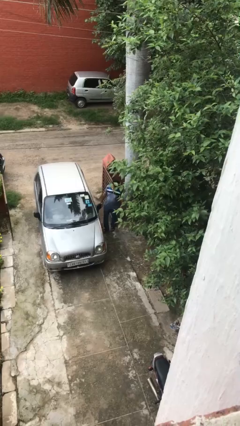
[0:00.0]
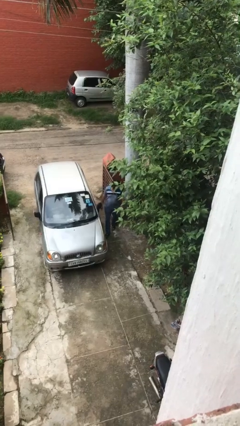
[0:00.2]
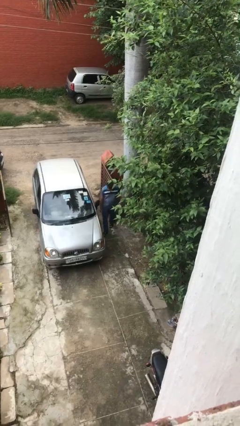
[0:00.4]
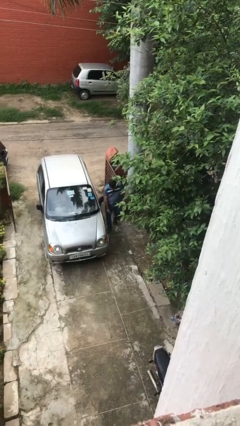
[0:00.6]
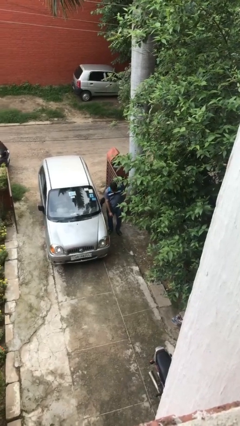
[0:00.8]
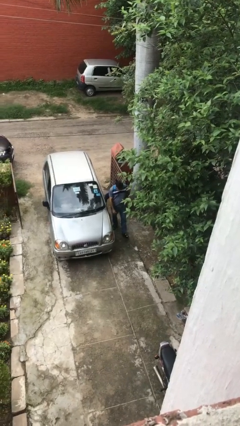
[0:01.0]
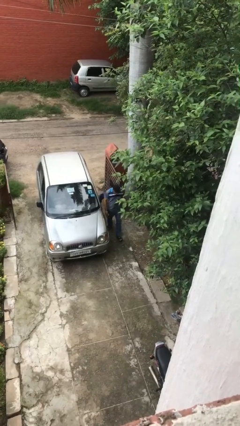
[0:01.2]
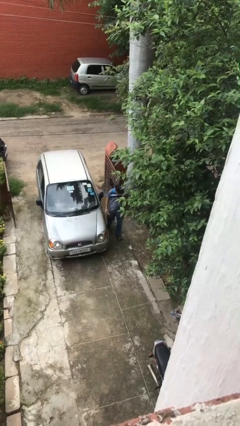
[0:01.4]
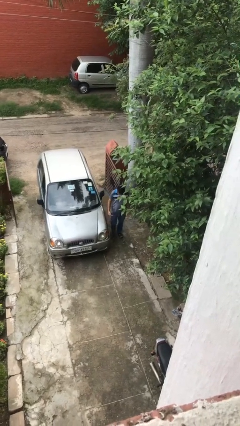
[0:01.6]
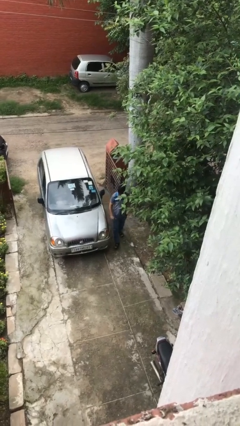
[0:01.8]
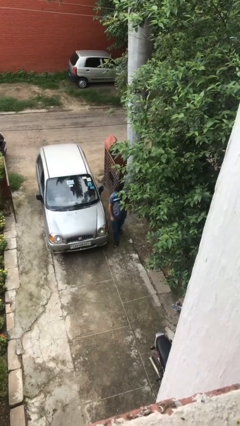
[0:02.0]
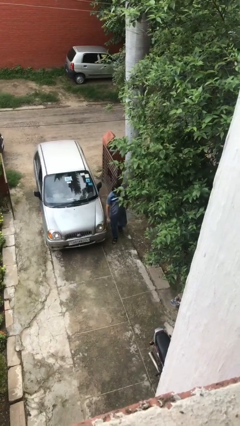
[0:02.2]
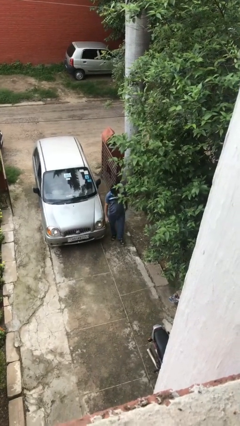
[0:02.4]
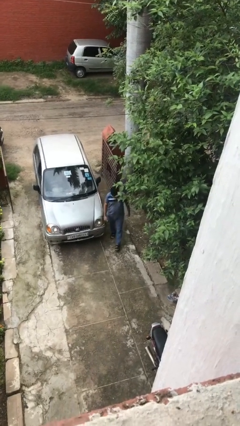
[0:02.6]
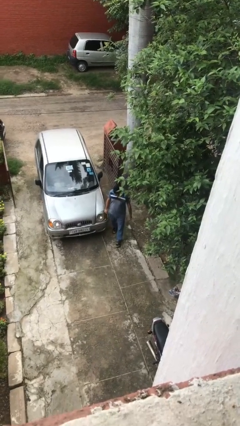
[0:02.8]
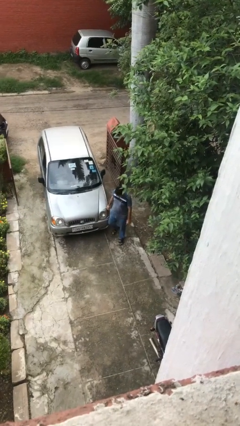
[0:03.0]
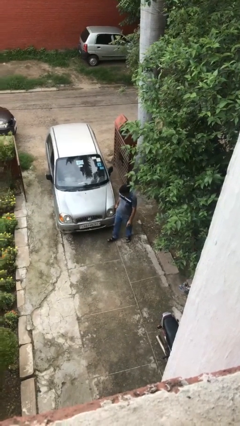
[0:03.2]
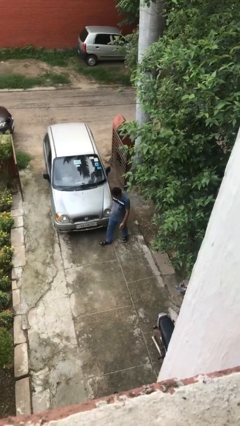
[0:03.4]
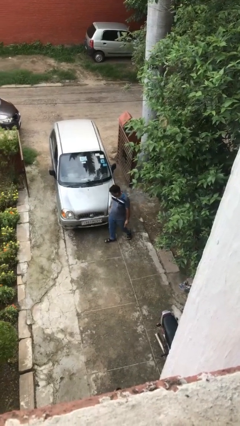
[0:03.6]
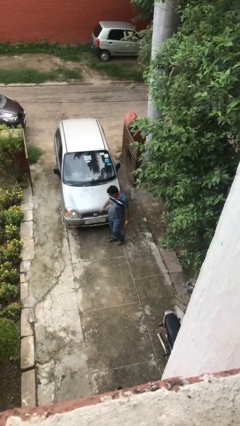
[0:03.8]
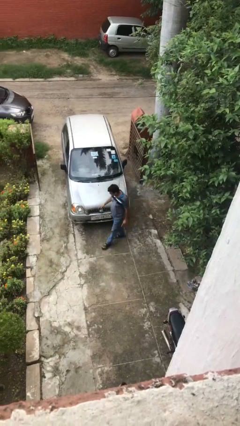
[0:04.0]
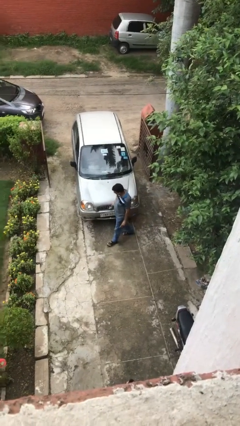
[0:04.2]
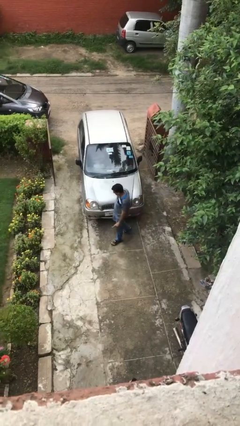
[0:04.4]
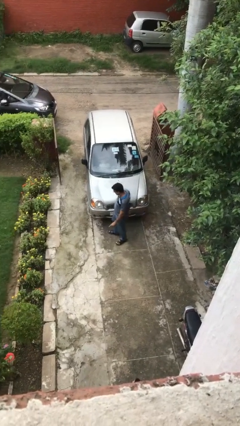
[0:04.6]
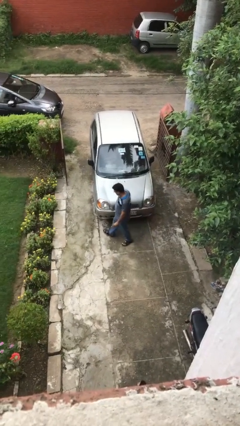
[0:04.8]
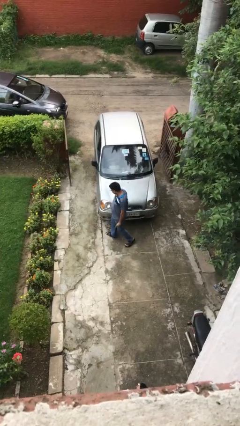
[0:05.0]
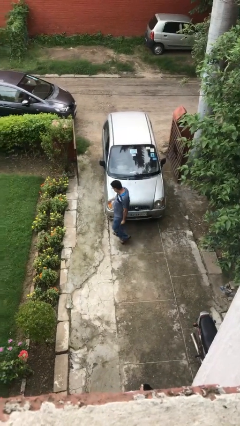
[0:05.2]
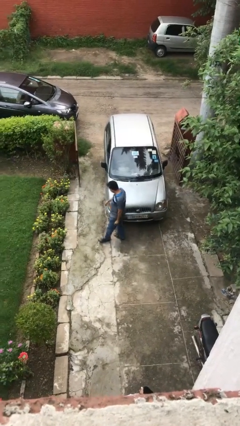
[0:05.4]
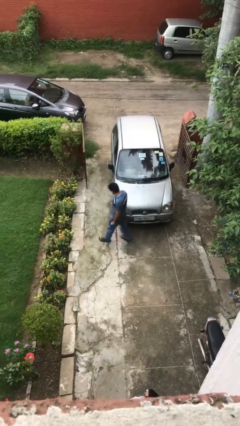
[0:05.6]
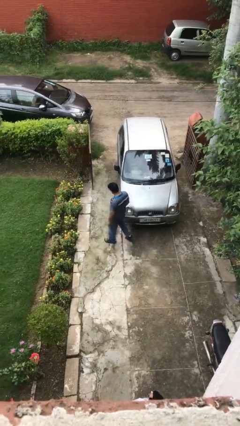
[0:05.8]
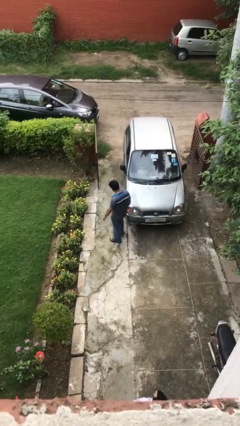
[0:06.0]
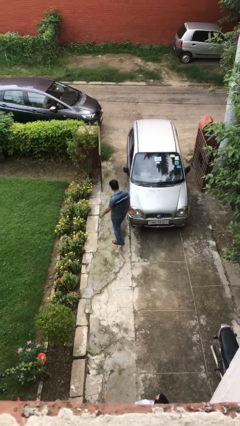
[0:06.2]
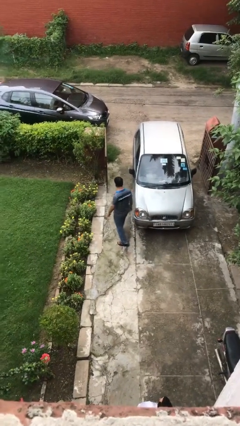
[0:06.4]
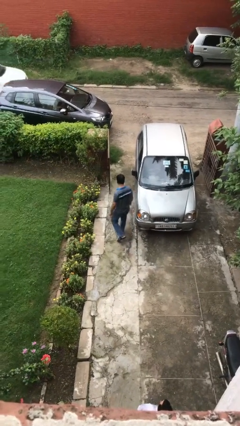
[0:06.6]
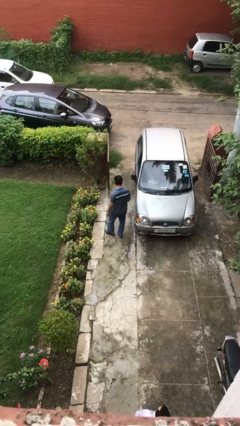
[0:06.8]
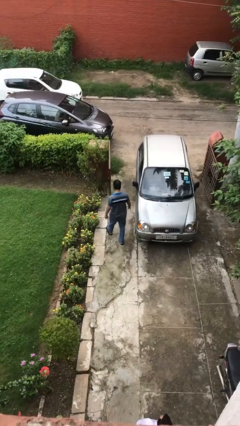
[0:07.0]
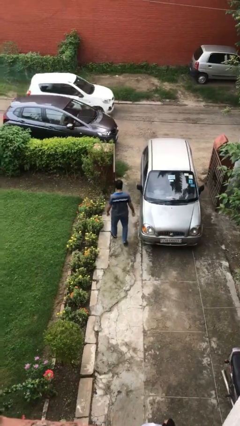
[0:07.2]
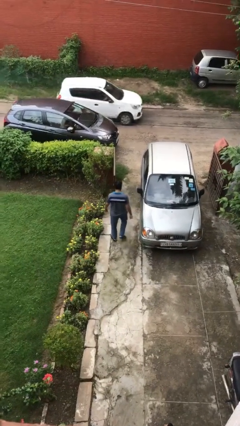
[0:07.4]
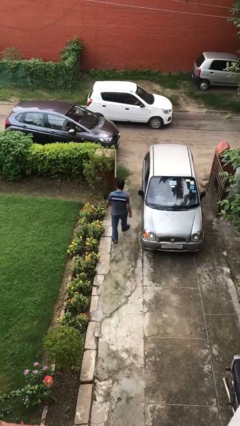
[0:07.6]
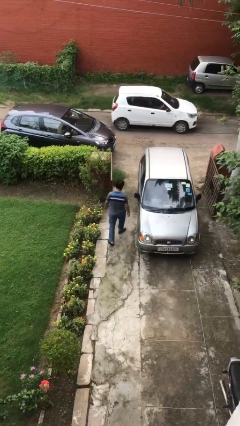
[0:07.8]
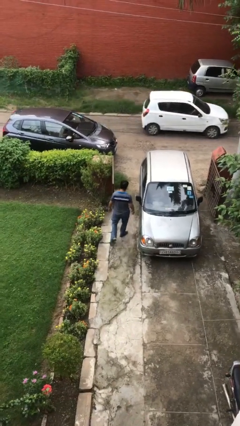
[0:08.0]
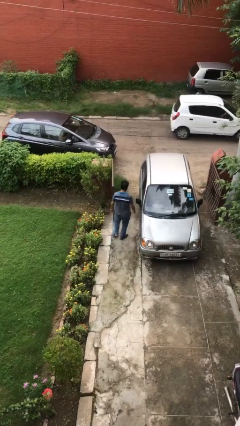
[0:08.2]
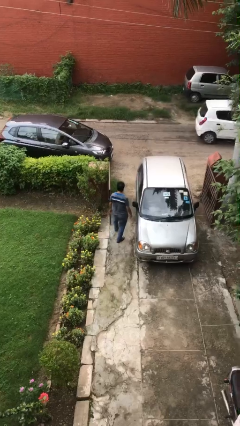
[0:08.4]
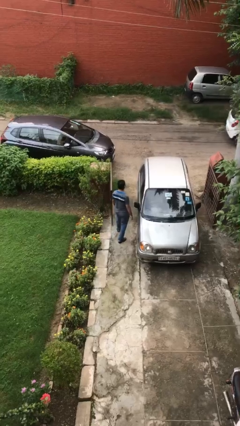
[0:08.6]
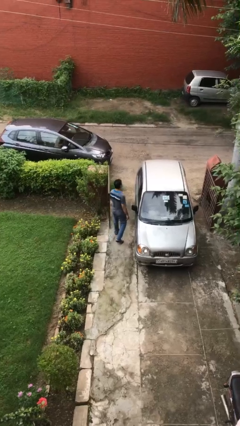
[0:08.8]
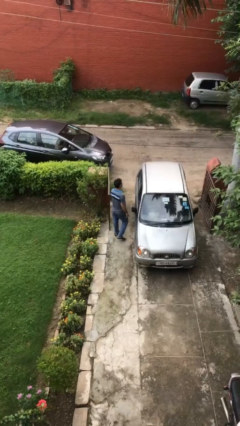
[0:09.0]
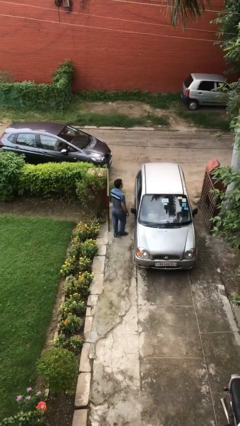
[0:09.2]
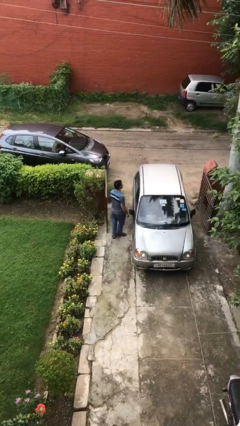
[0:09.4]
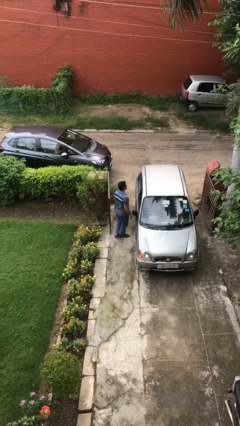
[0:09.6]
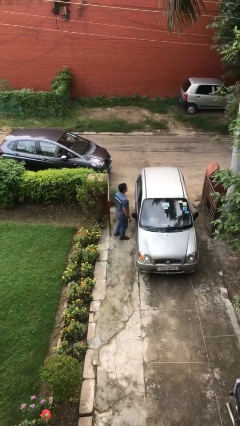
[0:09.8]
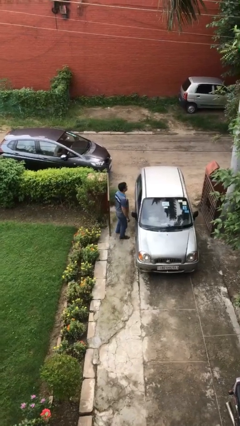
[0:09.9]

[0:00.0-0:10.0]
person walks around car

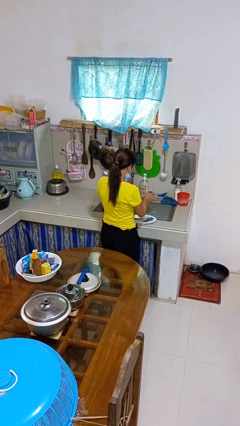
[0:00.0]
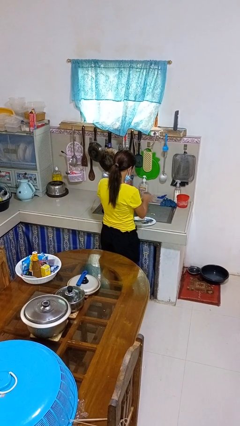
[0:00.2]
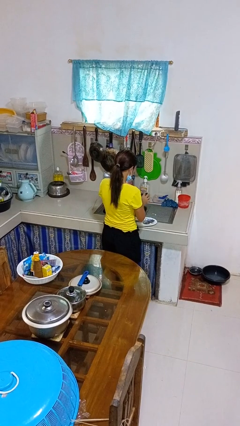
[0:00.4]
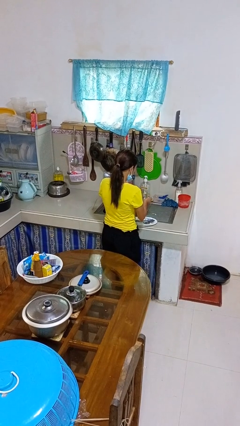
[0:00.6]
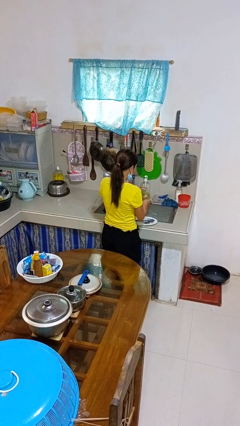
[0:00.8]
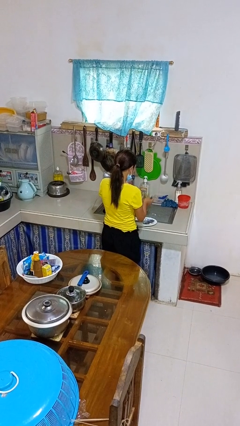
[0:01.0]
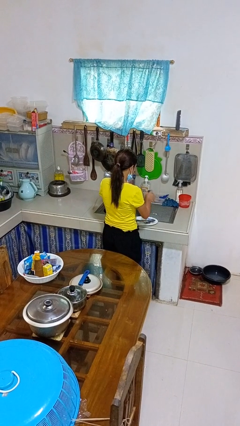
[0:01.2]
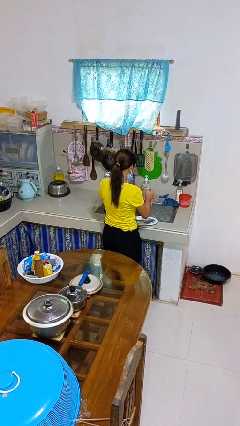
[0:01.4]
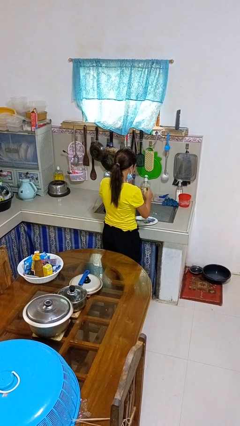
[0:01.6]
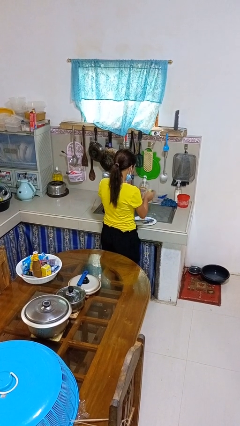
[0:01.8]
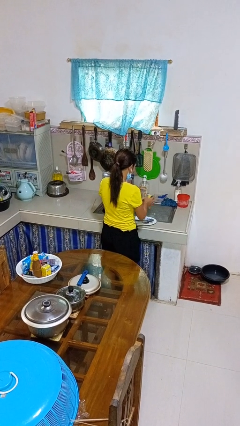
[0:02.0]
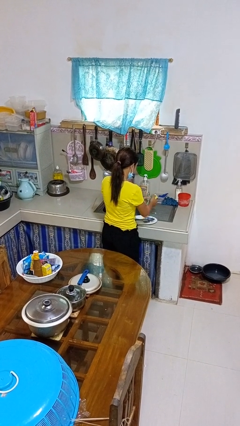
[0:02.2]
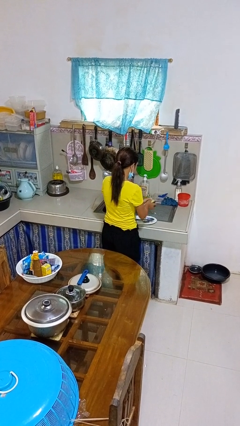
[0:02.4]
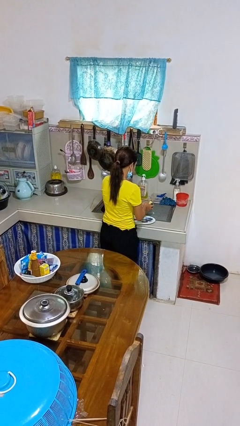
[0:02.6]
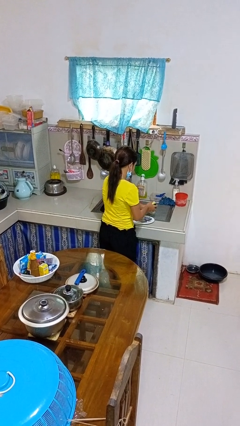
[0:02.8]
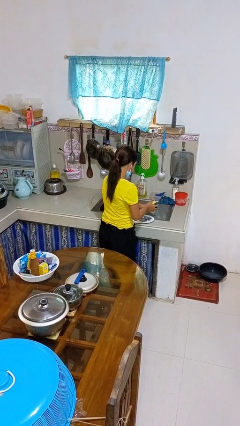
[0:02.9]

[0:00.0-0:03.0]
person washes dish

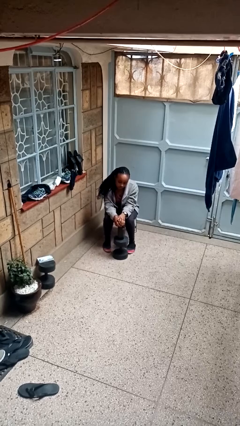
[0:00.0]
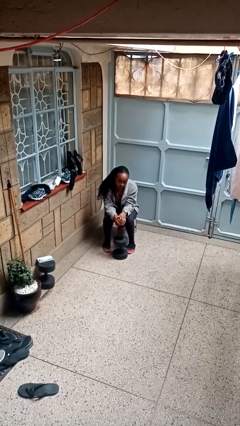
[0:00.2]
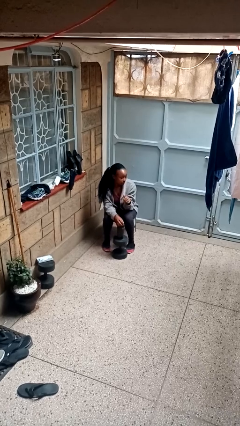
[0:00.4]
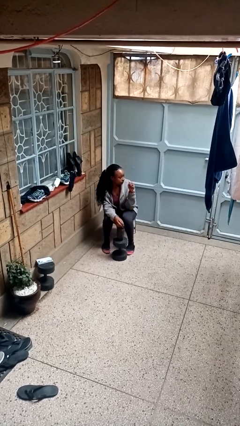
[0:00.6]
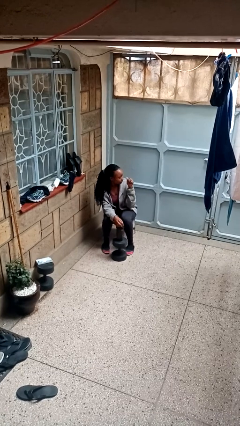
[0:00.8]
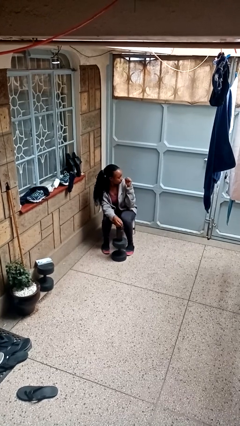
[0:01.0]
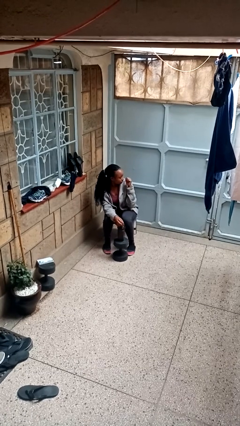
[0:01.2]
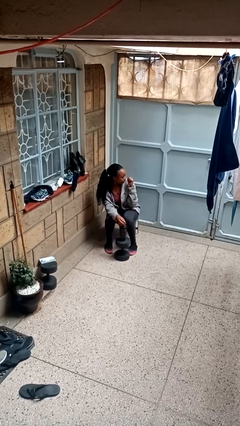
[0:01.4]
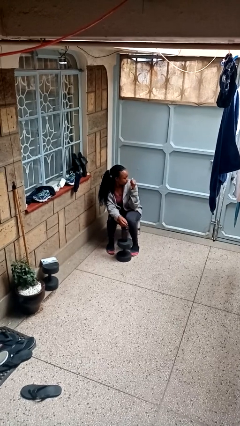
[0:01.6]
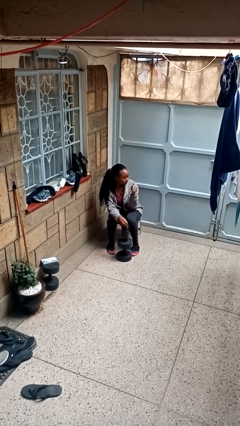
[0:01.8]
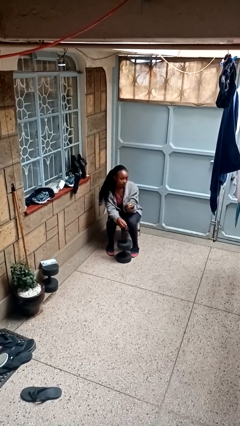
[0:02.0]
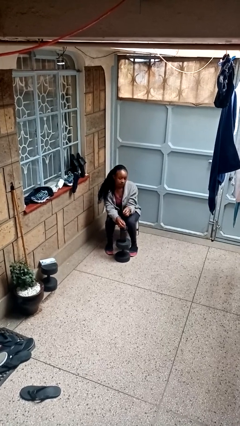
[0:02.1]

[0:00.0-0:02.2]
person gestures behind me

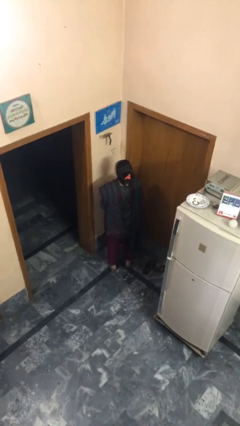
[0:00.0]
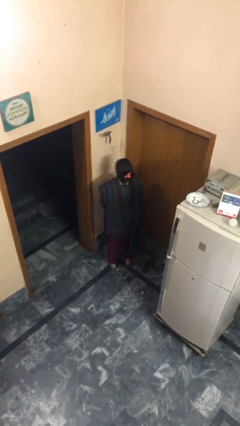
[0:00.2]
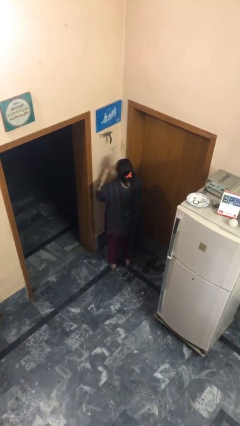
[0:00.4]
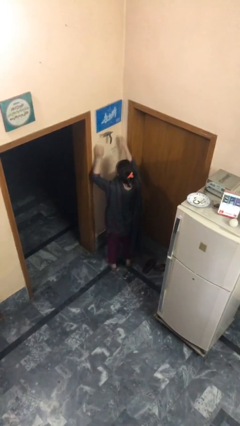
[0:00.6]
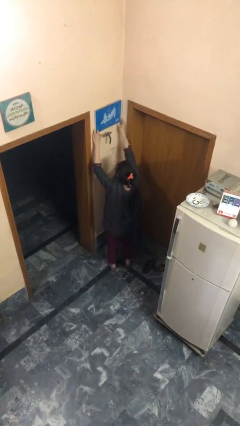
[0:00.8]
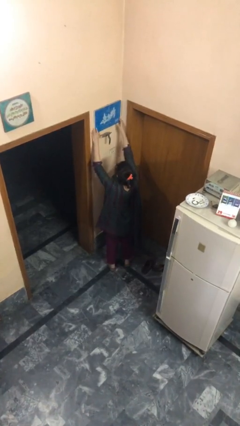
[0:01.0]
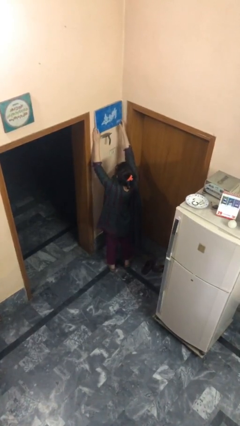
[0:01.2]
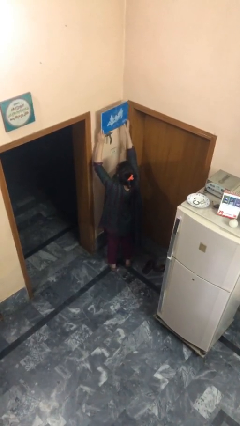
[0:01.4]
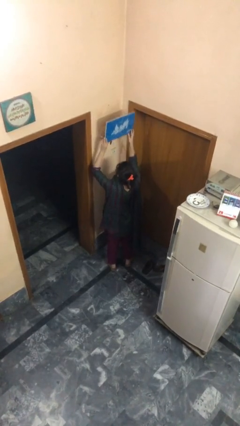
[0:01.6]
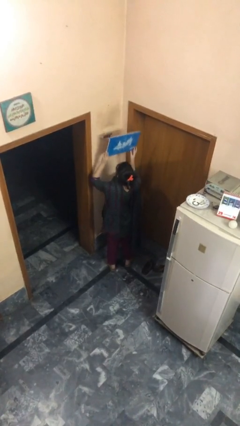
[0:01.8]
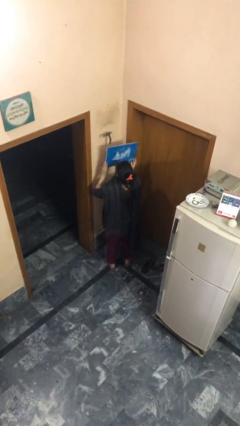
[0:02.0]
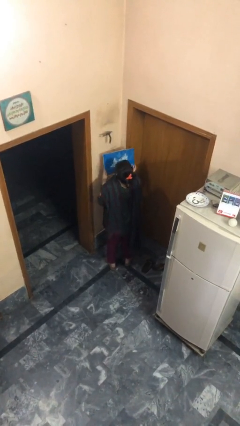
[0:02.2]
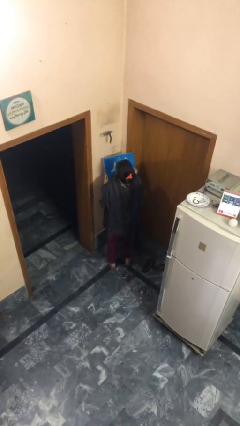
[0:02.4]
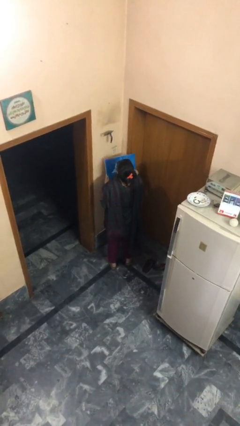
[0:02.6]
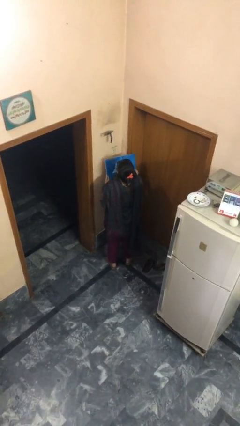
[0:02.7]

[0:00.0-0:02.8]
person takes down picture frame
